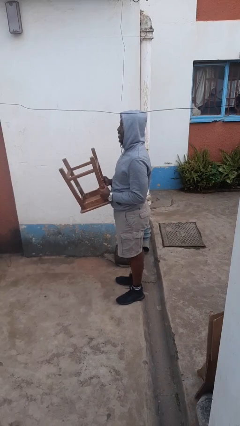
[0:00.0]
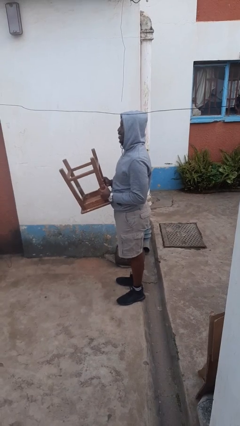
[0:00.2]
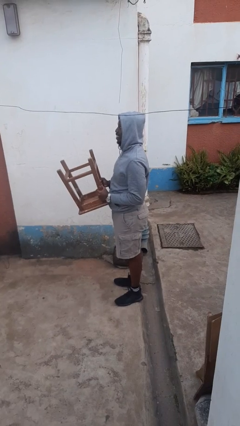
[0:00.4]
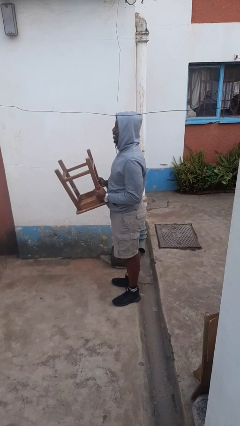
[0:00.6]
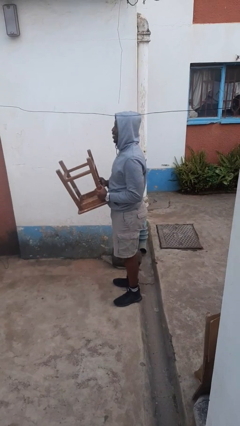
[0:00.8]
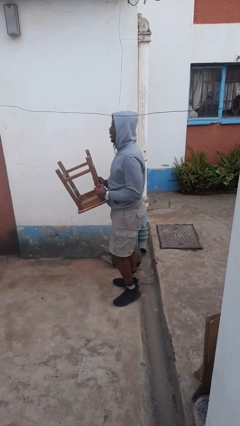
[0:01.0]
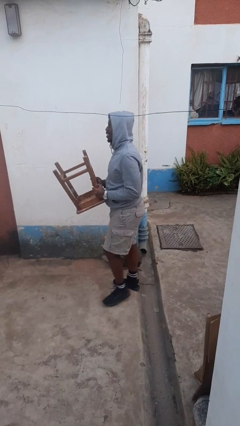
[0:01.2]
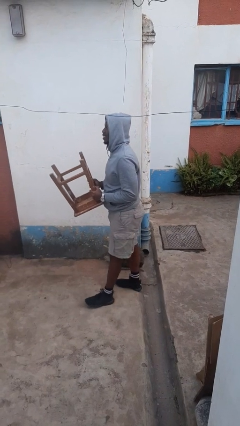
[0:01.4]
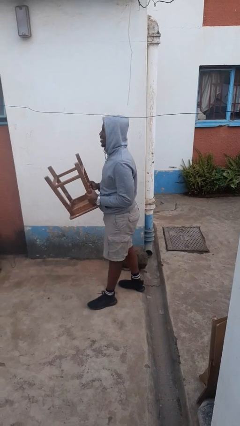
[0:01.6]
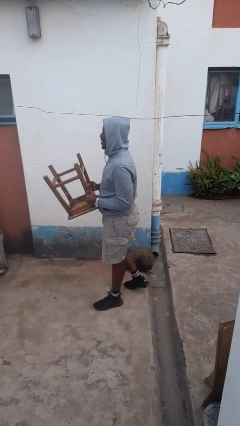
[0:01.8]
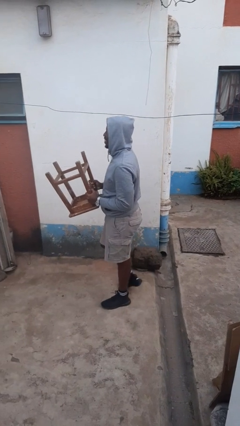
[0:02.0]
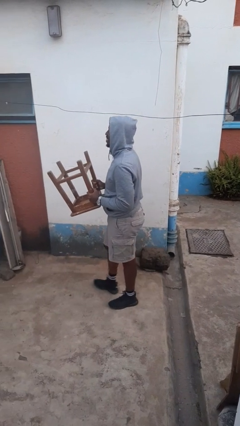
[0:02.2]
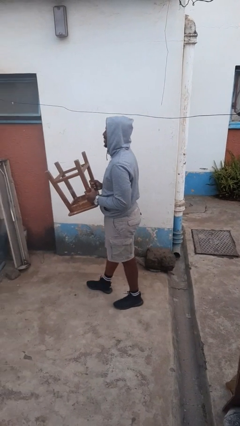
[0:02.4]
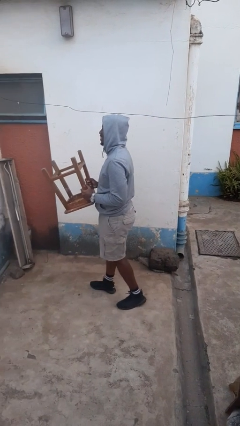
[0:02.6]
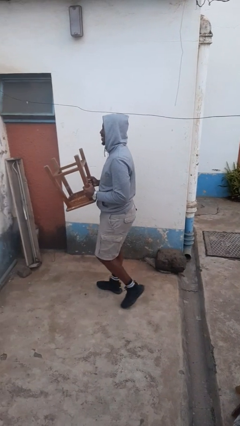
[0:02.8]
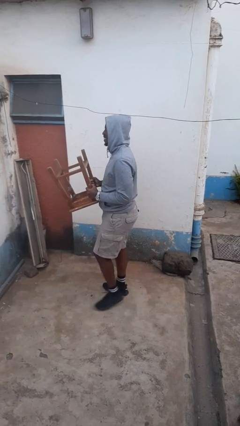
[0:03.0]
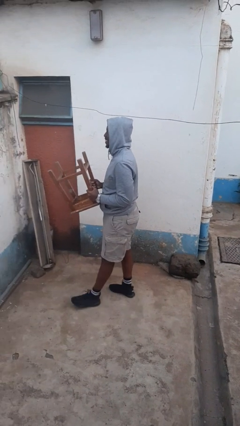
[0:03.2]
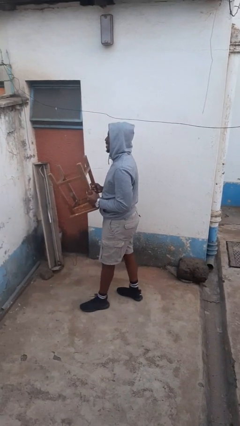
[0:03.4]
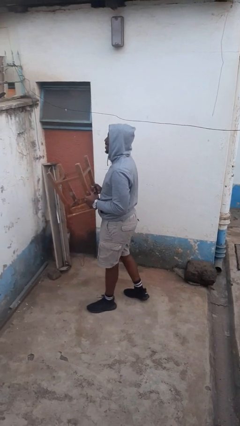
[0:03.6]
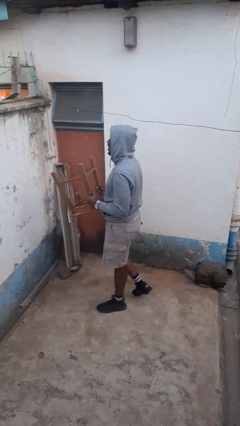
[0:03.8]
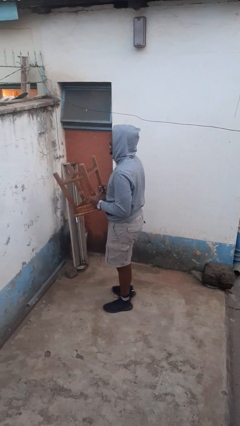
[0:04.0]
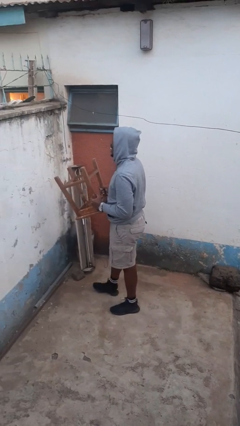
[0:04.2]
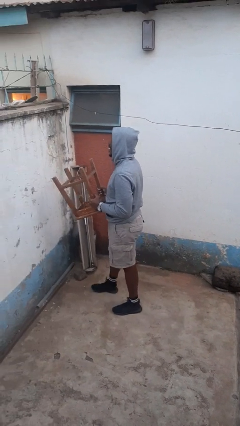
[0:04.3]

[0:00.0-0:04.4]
person carries furniture

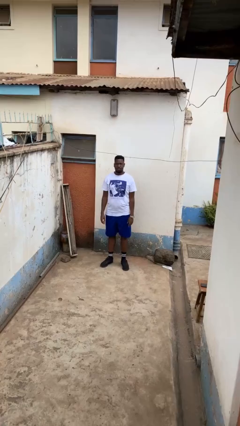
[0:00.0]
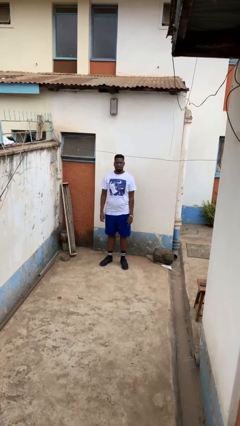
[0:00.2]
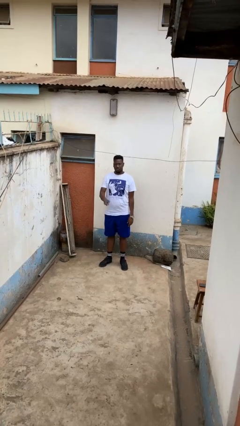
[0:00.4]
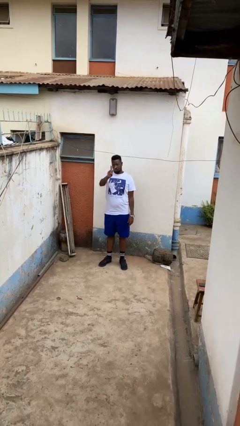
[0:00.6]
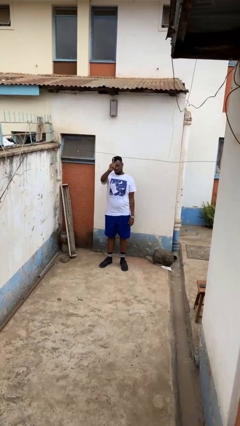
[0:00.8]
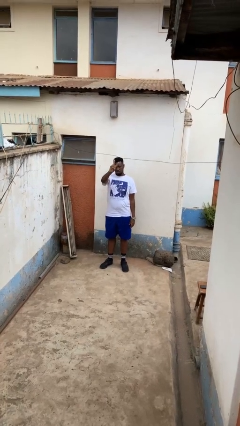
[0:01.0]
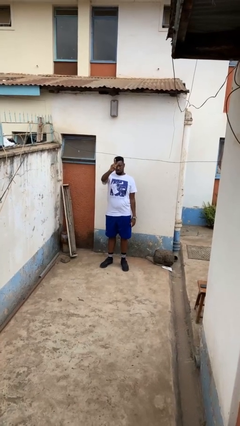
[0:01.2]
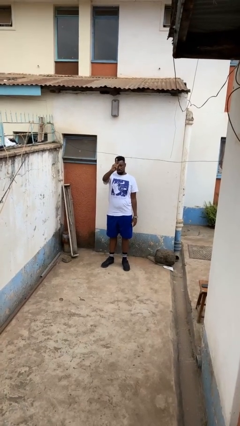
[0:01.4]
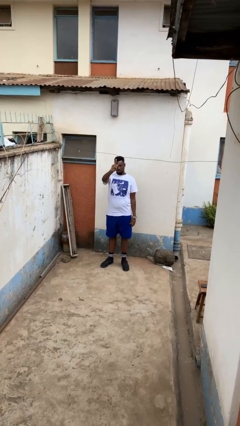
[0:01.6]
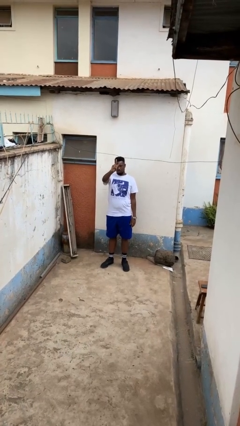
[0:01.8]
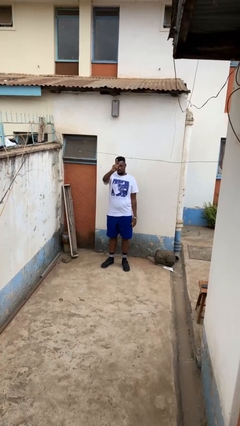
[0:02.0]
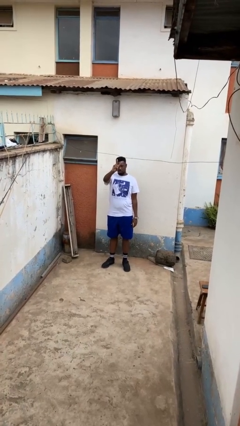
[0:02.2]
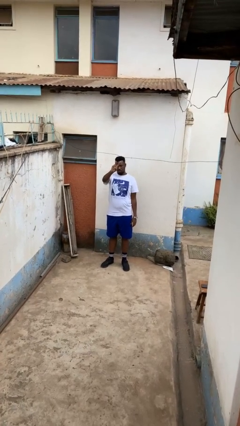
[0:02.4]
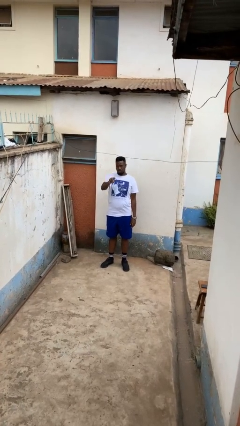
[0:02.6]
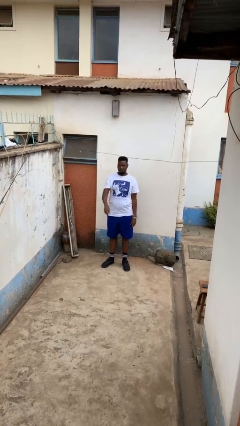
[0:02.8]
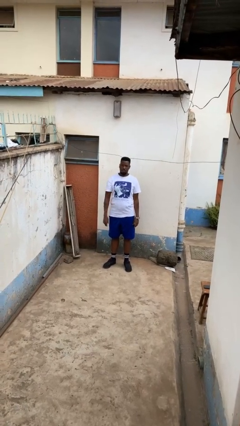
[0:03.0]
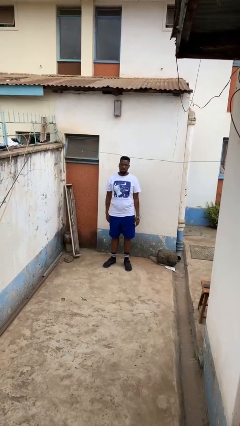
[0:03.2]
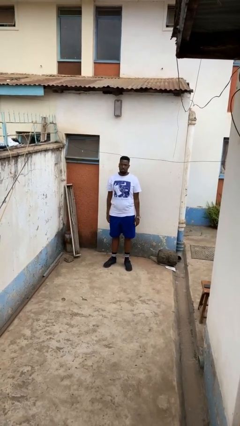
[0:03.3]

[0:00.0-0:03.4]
person gestures peace

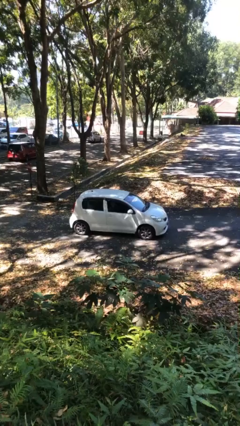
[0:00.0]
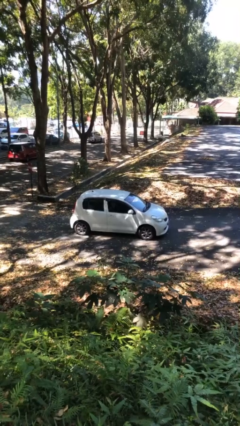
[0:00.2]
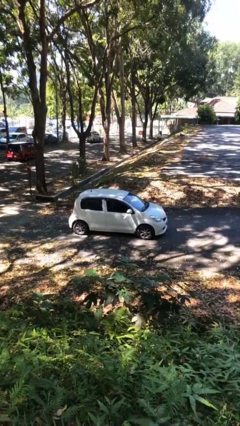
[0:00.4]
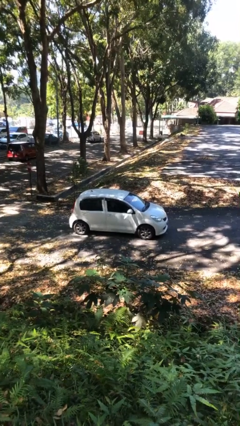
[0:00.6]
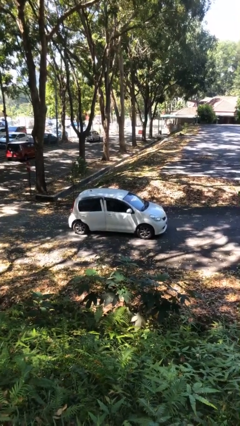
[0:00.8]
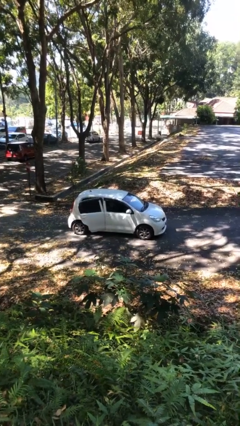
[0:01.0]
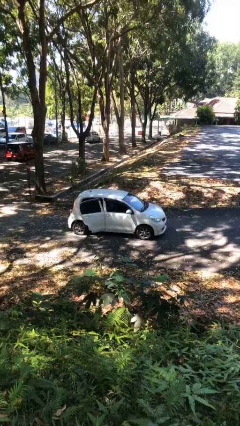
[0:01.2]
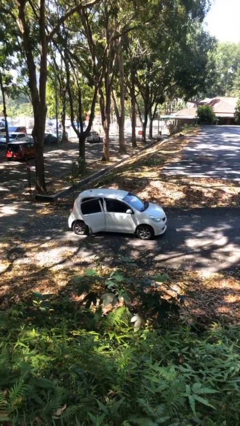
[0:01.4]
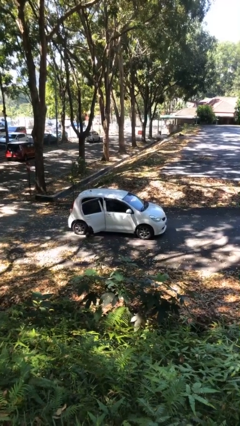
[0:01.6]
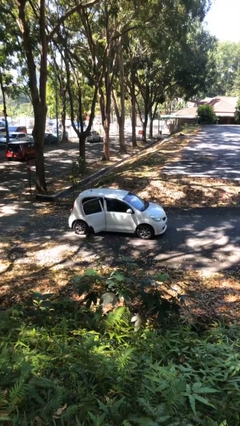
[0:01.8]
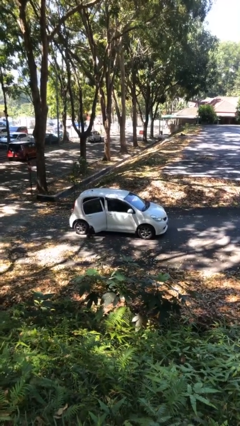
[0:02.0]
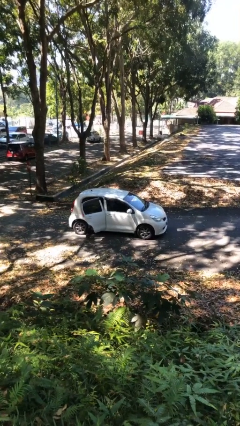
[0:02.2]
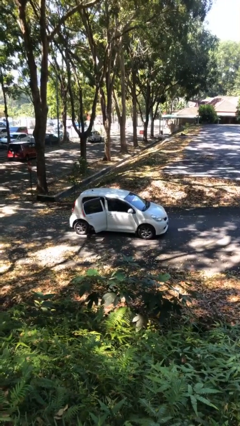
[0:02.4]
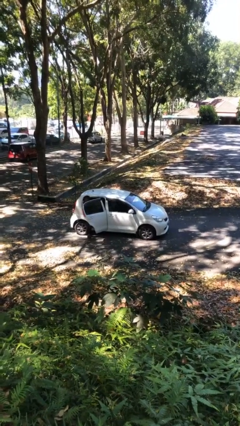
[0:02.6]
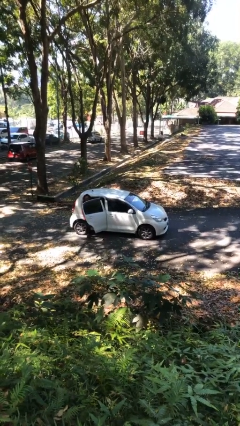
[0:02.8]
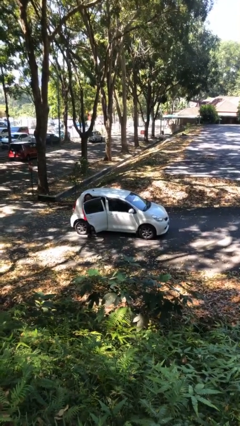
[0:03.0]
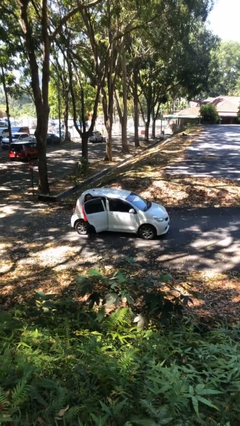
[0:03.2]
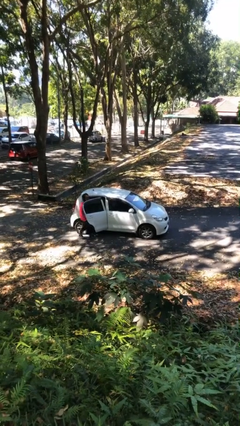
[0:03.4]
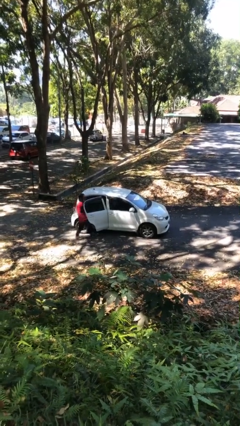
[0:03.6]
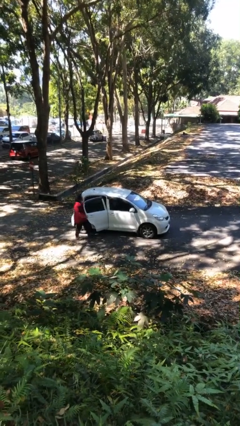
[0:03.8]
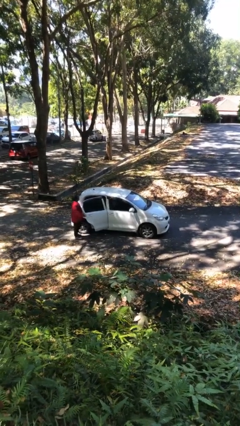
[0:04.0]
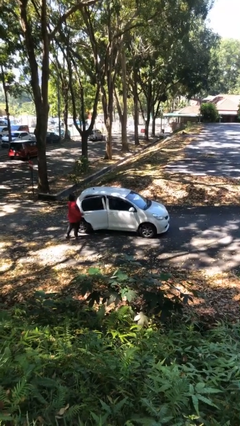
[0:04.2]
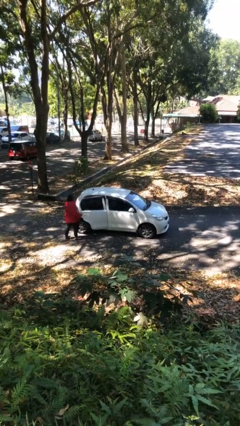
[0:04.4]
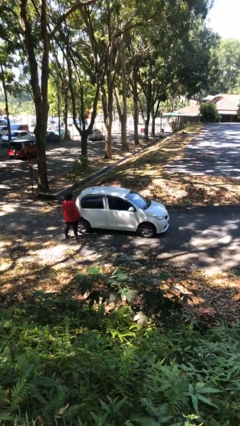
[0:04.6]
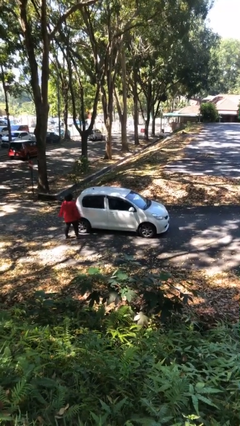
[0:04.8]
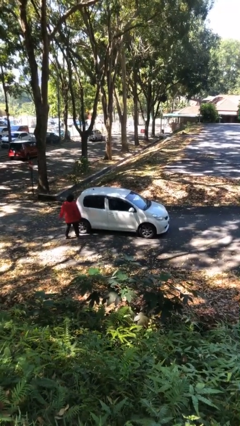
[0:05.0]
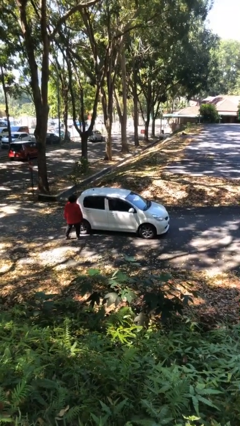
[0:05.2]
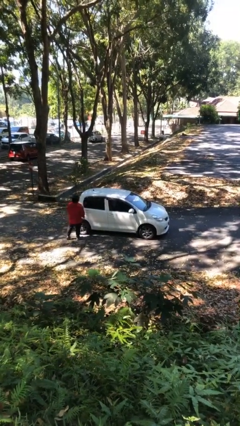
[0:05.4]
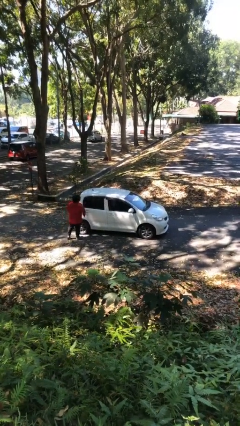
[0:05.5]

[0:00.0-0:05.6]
car drops off person

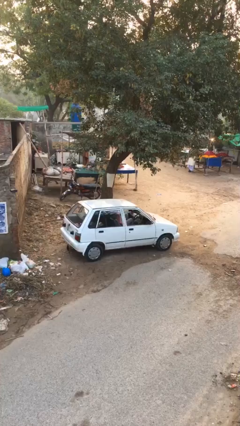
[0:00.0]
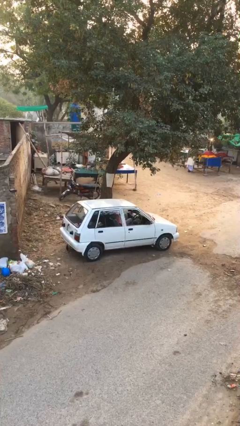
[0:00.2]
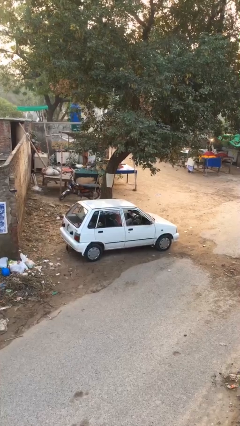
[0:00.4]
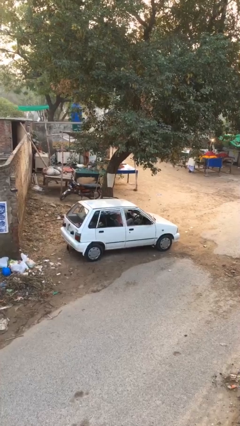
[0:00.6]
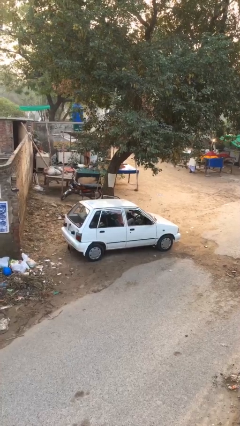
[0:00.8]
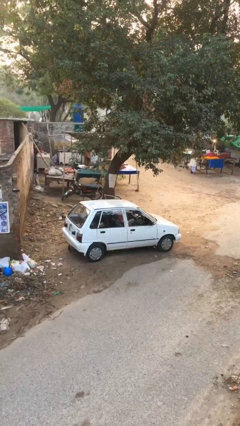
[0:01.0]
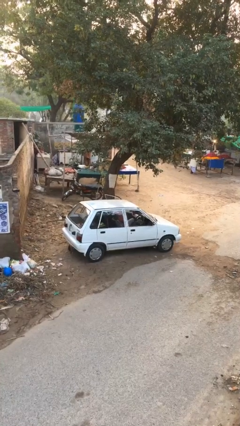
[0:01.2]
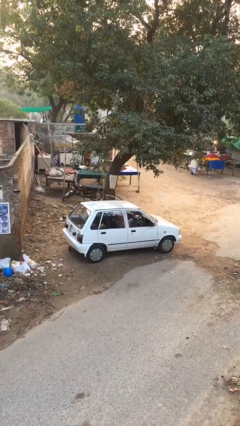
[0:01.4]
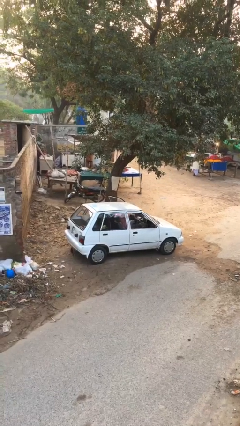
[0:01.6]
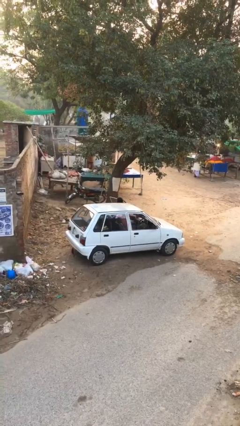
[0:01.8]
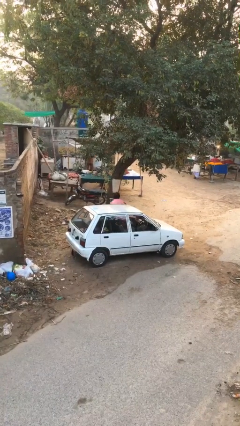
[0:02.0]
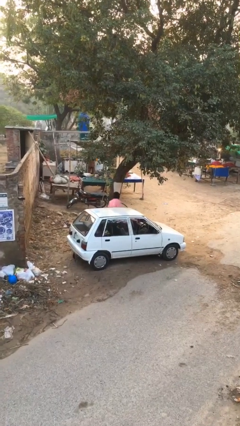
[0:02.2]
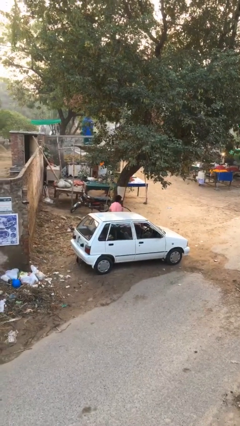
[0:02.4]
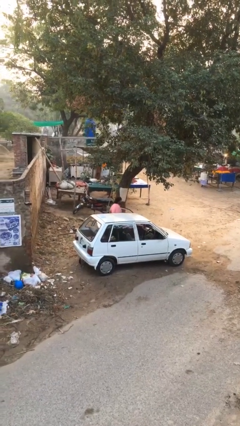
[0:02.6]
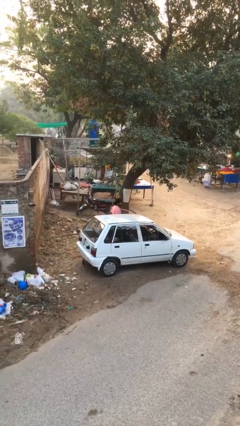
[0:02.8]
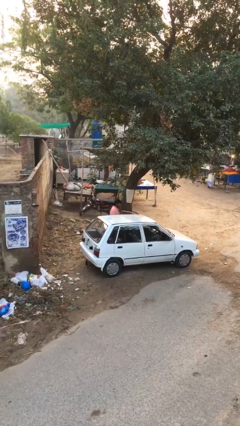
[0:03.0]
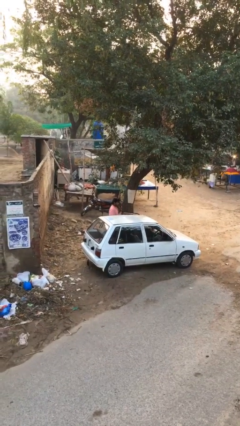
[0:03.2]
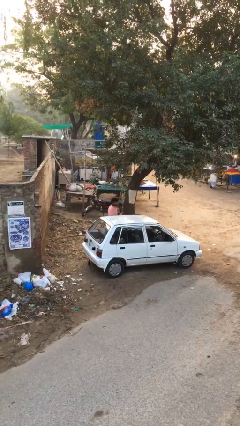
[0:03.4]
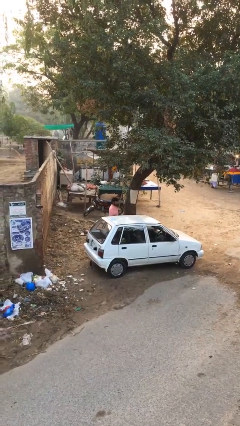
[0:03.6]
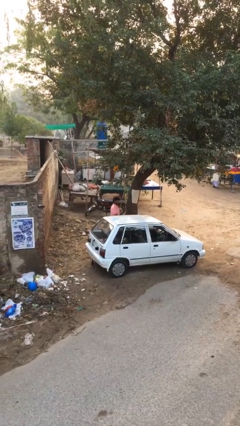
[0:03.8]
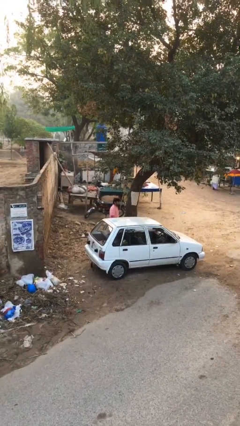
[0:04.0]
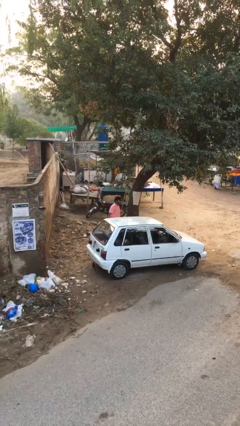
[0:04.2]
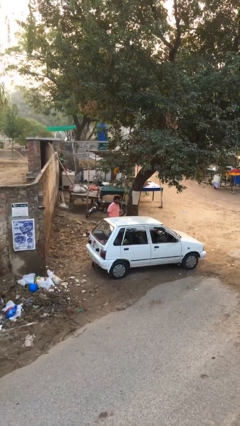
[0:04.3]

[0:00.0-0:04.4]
person exits car

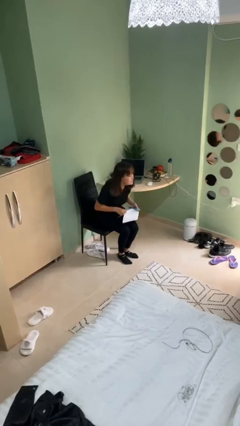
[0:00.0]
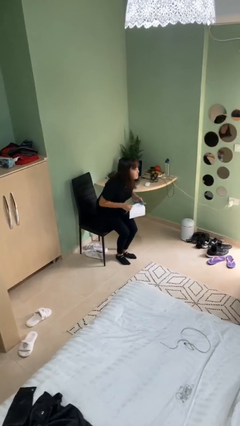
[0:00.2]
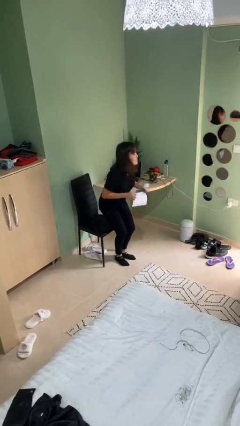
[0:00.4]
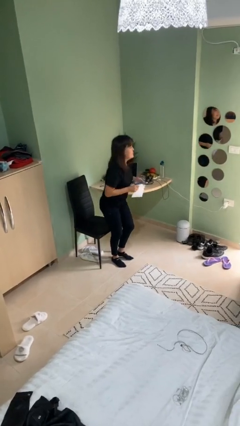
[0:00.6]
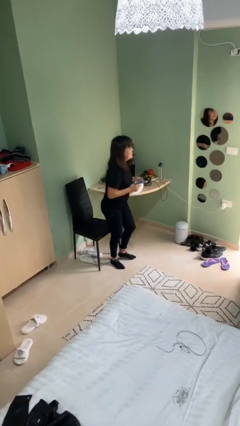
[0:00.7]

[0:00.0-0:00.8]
person stands up
